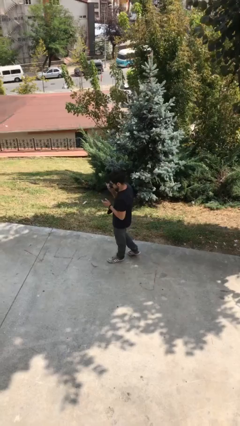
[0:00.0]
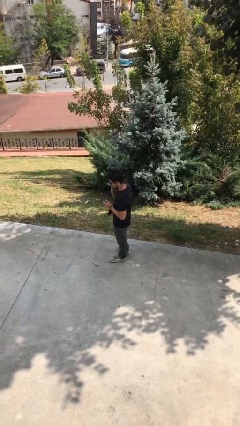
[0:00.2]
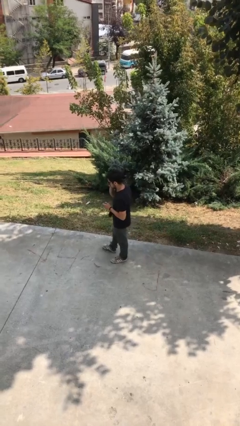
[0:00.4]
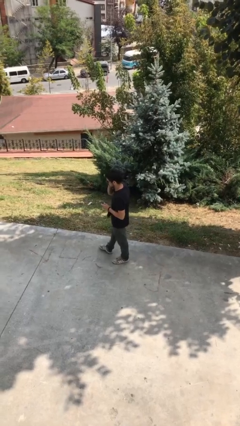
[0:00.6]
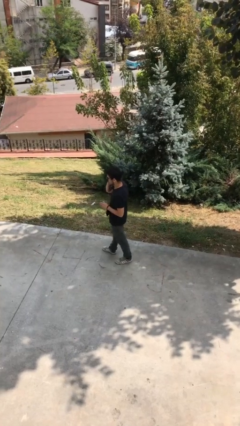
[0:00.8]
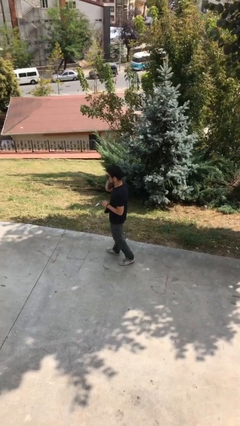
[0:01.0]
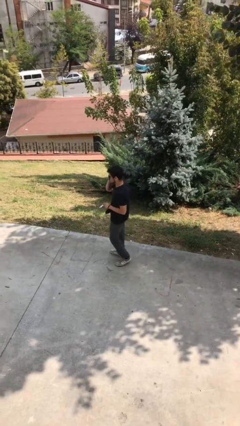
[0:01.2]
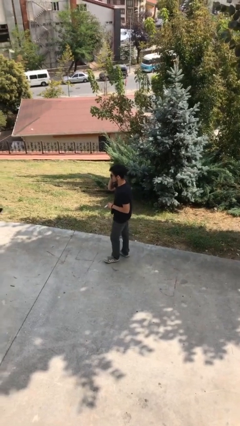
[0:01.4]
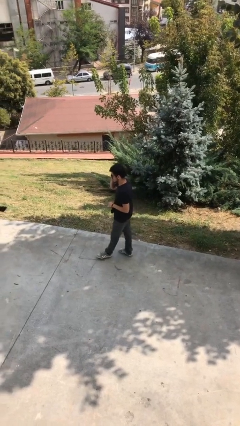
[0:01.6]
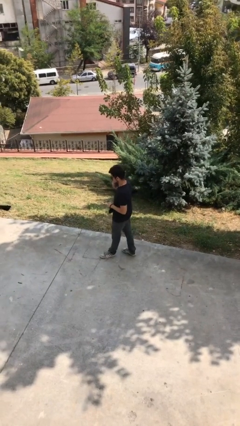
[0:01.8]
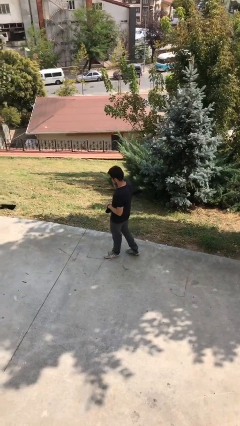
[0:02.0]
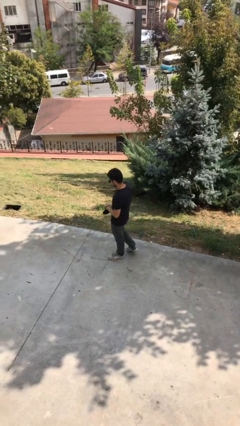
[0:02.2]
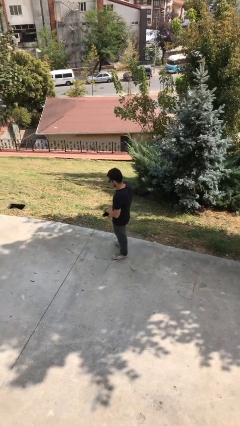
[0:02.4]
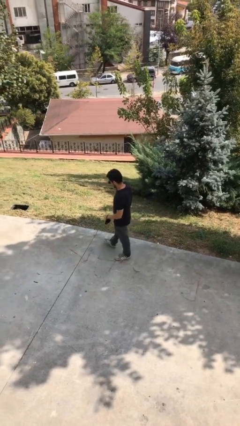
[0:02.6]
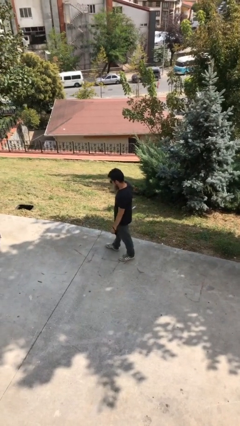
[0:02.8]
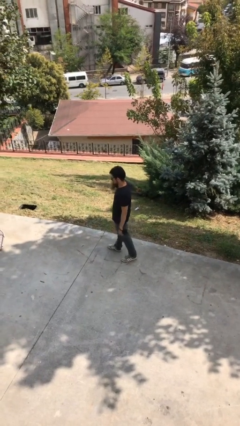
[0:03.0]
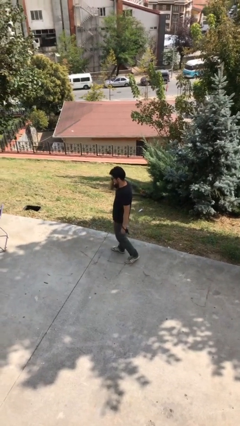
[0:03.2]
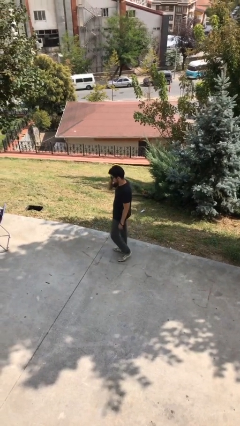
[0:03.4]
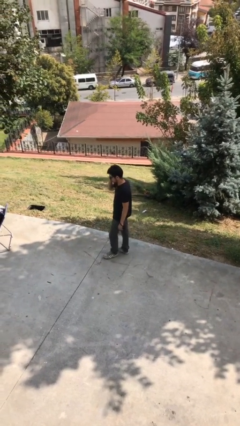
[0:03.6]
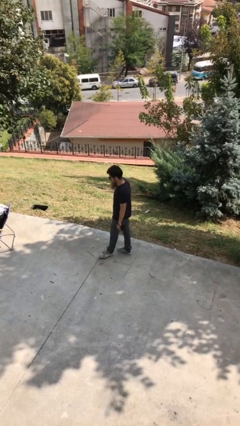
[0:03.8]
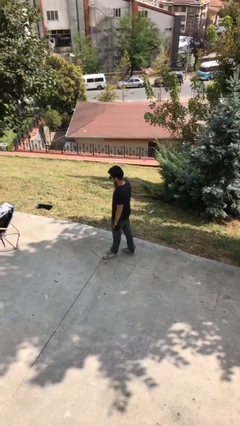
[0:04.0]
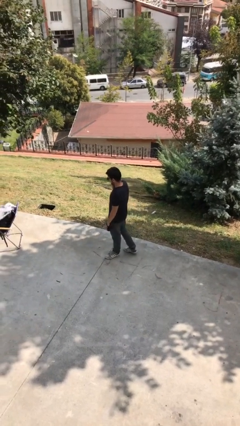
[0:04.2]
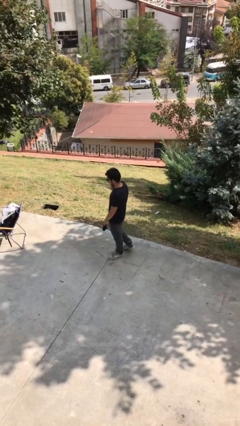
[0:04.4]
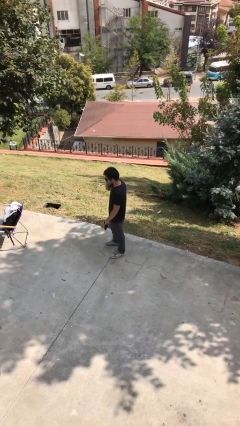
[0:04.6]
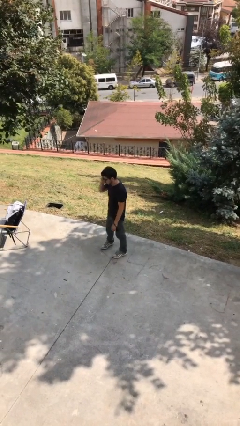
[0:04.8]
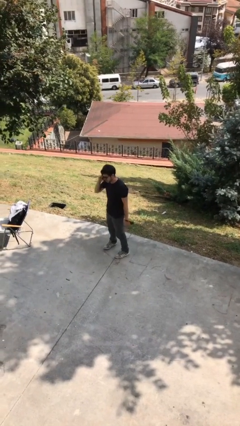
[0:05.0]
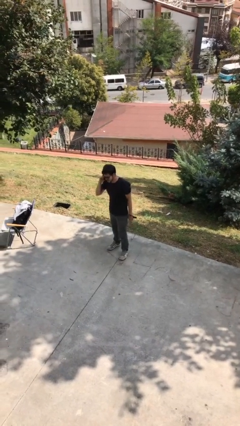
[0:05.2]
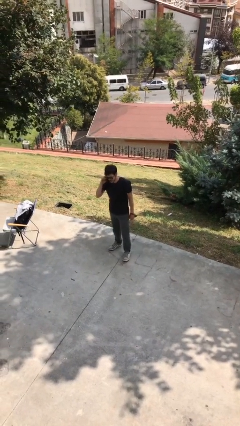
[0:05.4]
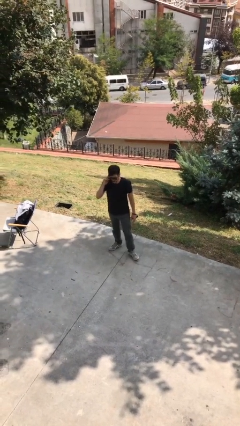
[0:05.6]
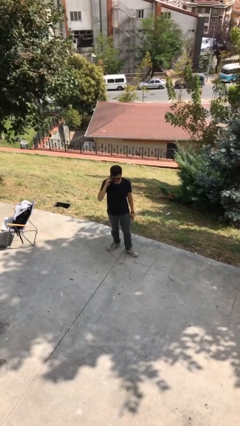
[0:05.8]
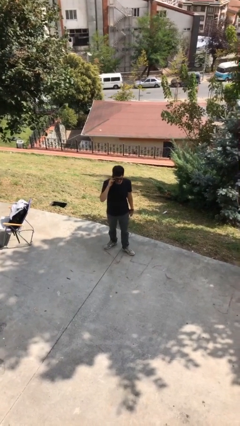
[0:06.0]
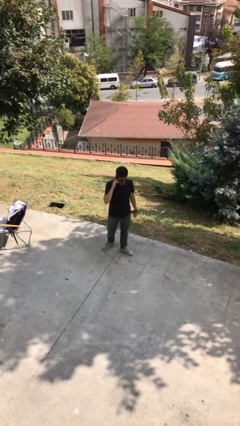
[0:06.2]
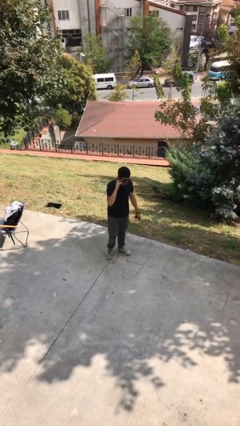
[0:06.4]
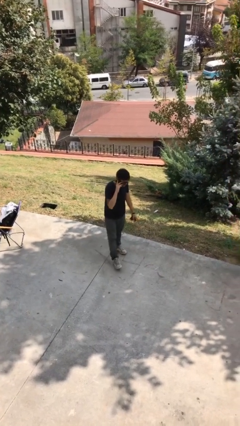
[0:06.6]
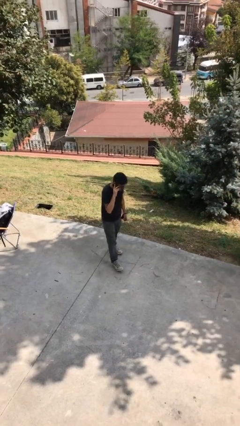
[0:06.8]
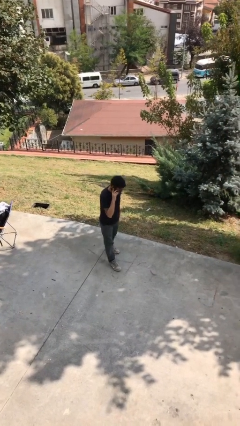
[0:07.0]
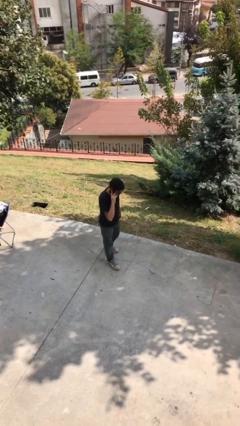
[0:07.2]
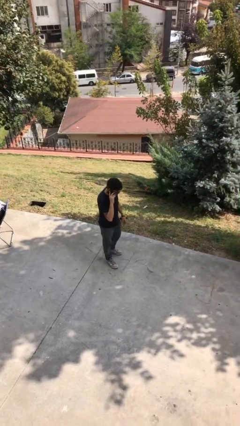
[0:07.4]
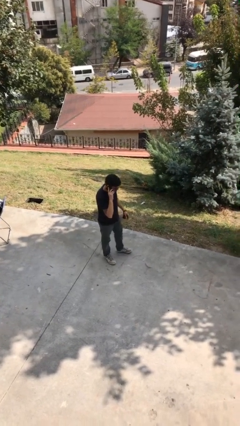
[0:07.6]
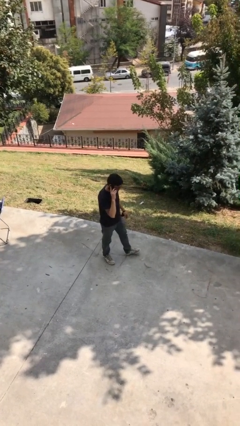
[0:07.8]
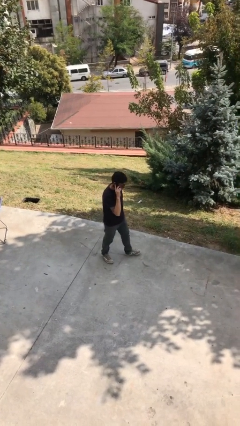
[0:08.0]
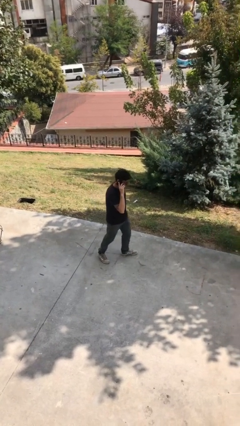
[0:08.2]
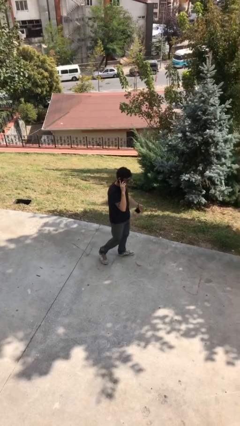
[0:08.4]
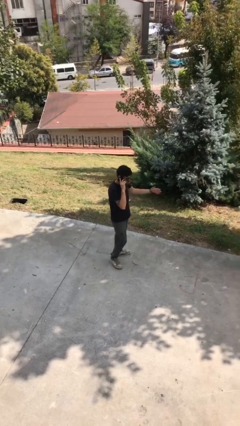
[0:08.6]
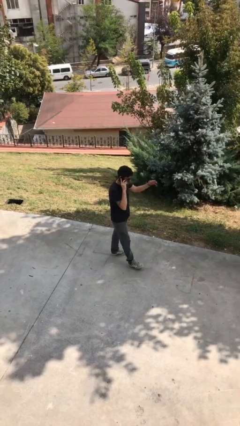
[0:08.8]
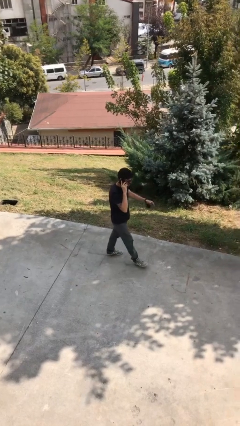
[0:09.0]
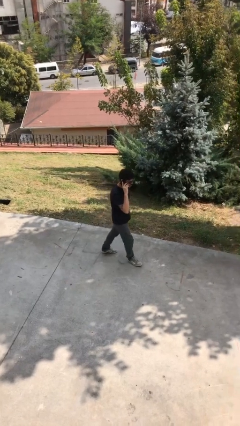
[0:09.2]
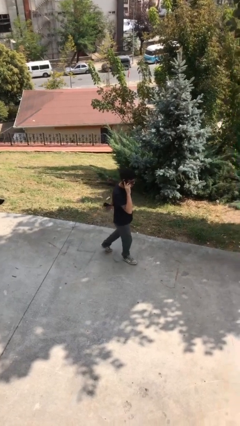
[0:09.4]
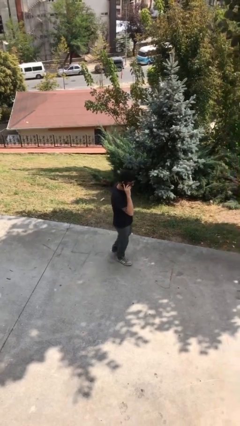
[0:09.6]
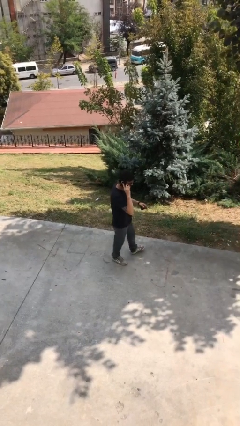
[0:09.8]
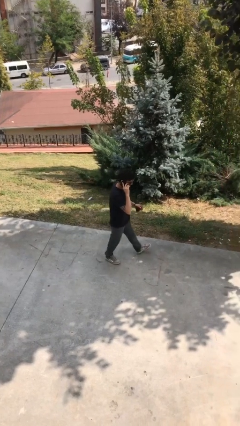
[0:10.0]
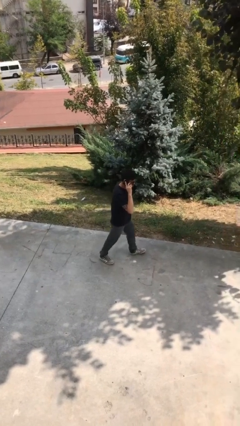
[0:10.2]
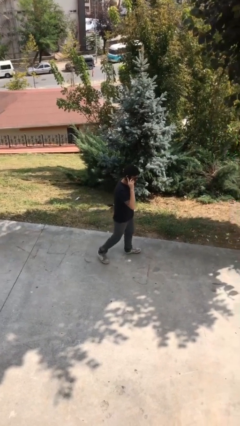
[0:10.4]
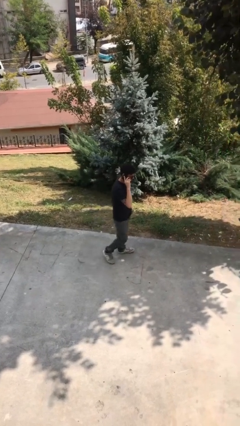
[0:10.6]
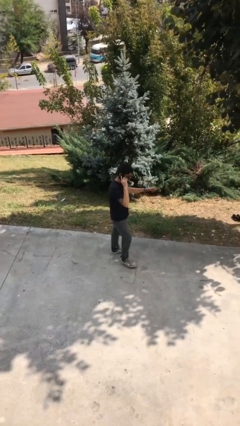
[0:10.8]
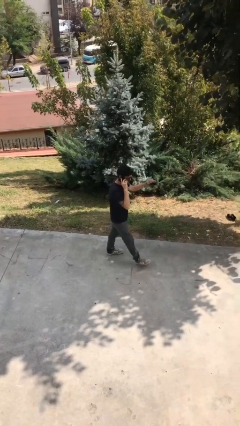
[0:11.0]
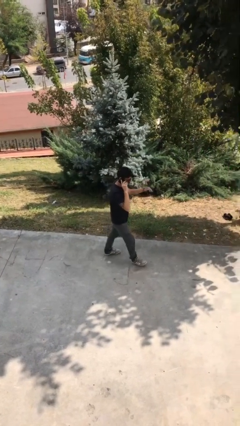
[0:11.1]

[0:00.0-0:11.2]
person talks on phone

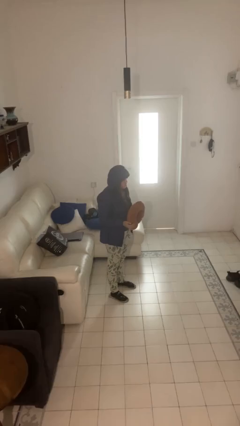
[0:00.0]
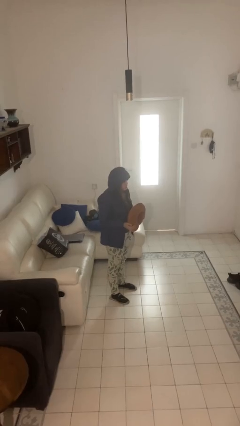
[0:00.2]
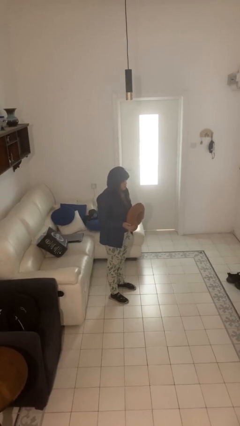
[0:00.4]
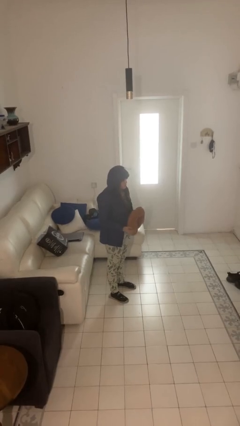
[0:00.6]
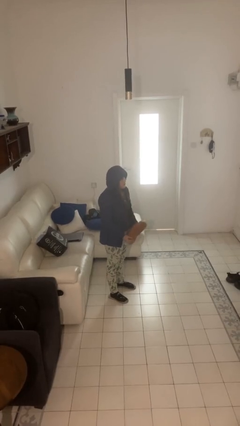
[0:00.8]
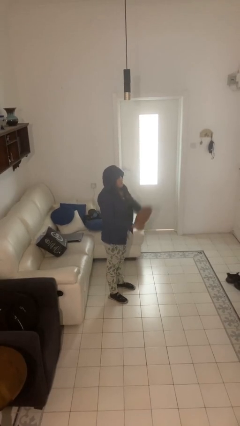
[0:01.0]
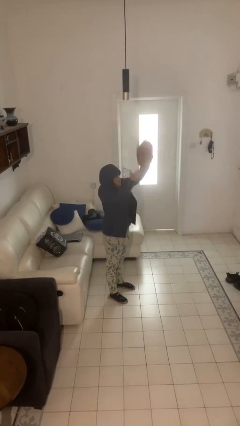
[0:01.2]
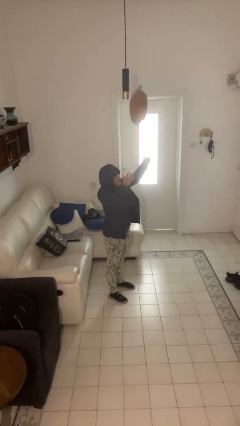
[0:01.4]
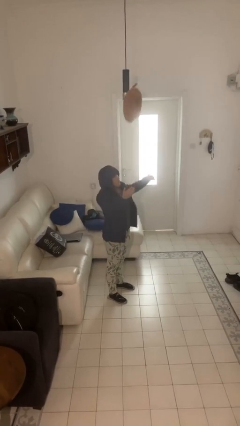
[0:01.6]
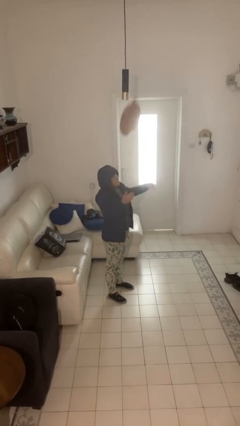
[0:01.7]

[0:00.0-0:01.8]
person drops object

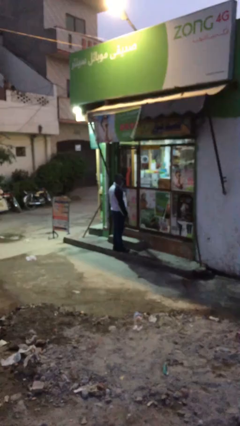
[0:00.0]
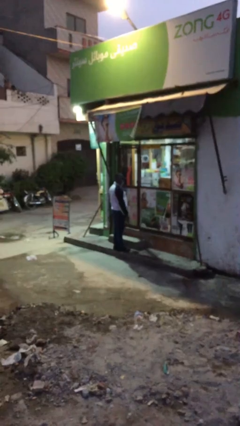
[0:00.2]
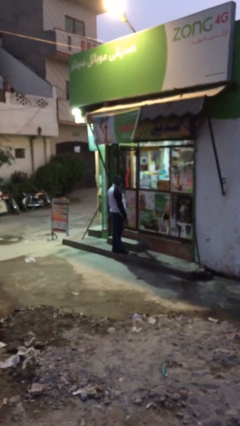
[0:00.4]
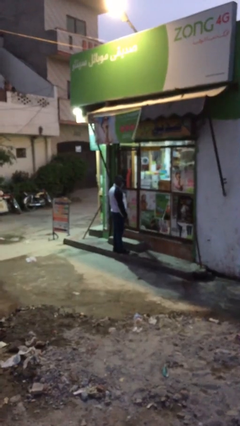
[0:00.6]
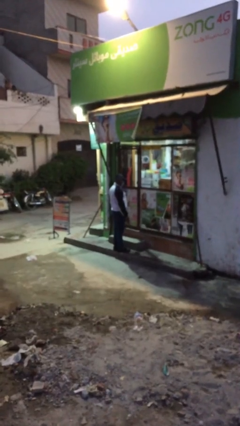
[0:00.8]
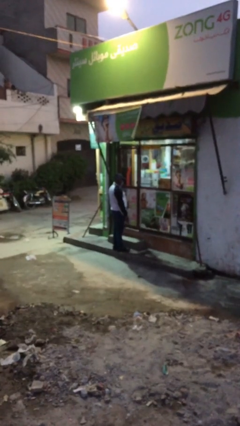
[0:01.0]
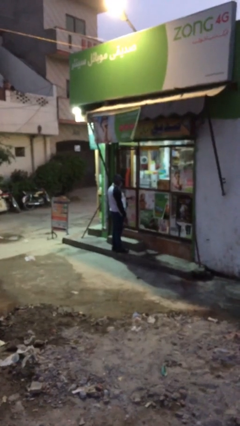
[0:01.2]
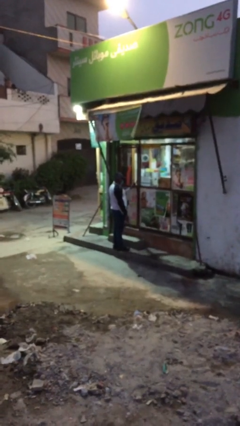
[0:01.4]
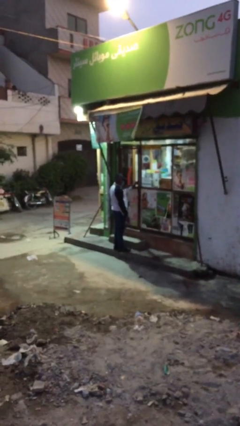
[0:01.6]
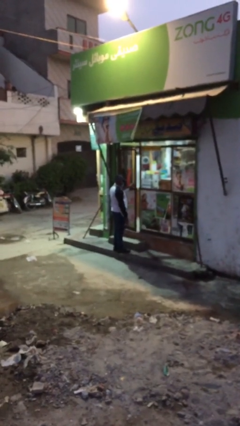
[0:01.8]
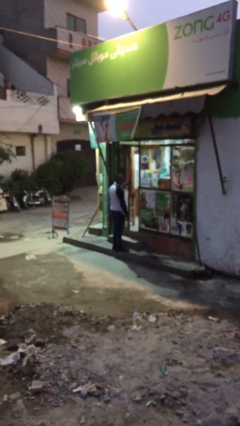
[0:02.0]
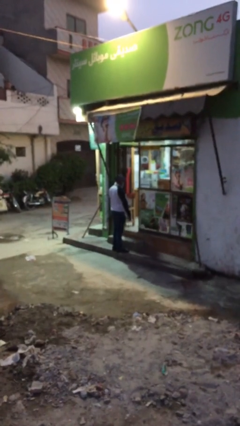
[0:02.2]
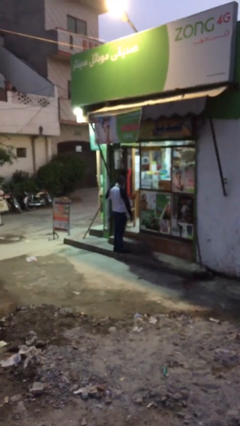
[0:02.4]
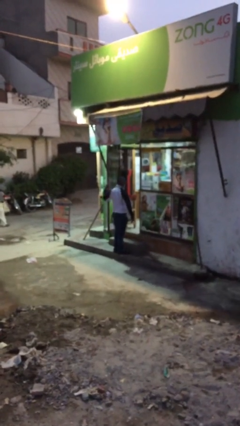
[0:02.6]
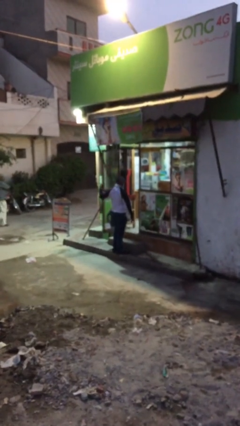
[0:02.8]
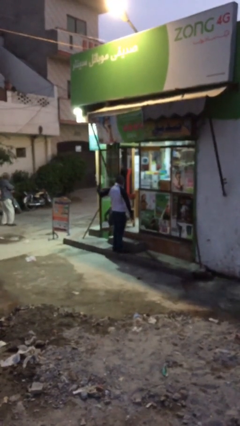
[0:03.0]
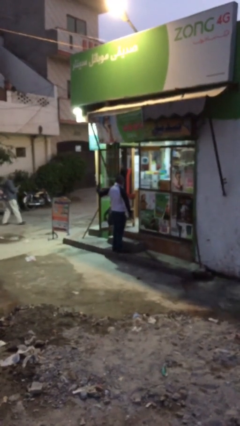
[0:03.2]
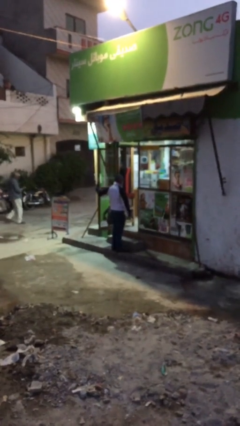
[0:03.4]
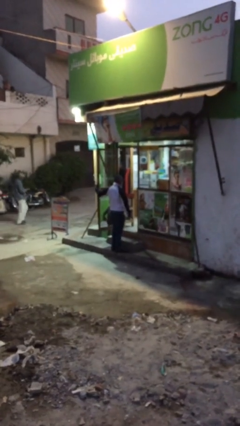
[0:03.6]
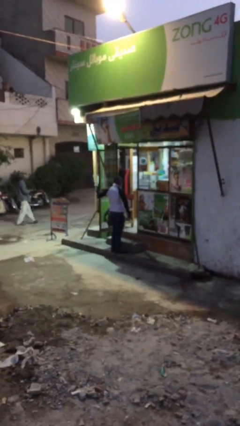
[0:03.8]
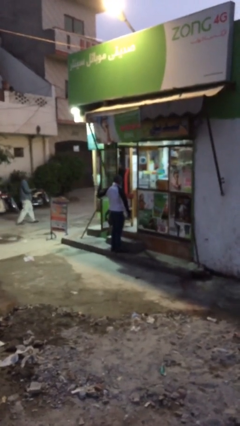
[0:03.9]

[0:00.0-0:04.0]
person opens facility door

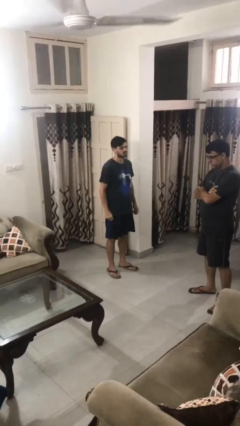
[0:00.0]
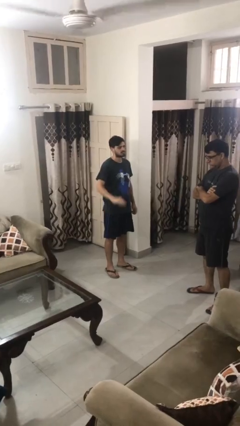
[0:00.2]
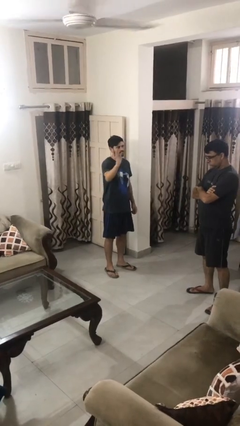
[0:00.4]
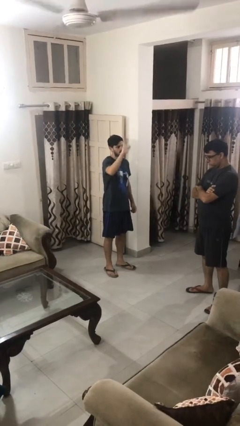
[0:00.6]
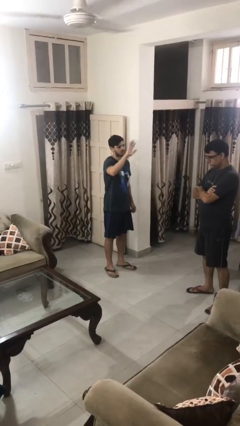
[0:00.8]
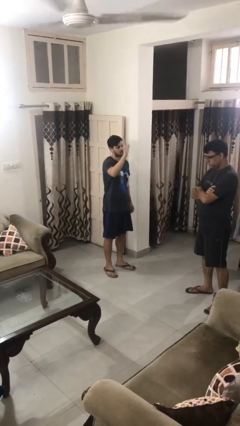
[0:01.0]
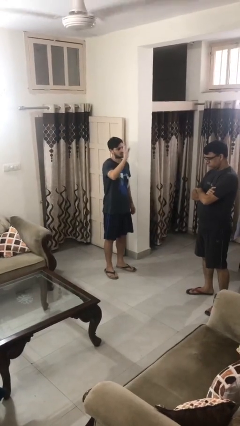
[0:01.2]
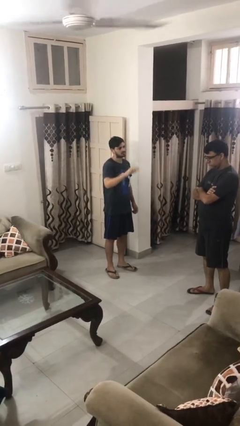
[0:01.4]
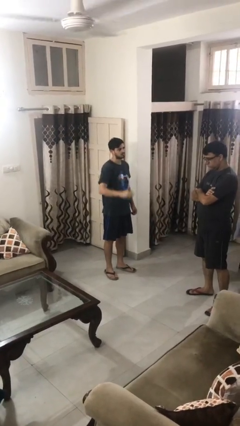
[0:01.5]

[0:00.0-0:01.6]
person waves at person
